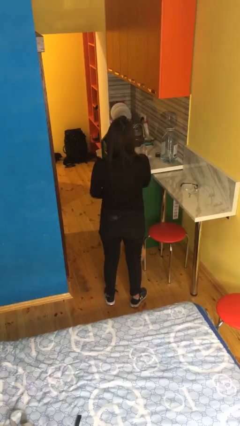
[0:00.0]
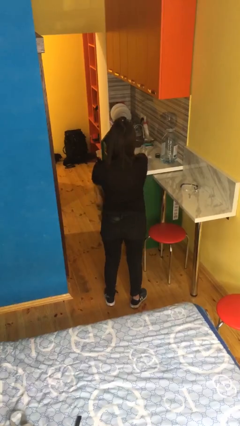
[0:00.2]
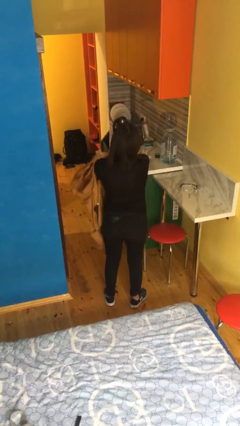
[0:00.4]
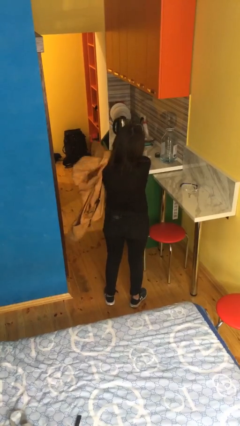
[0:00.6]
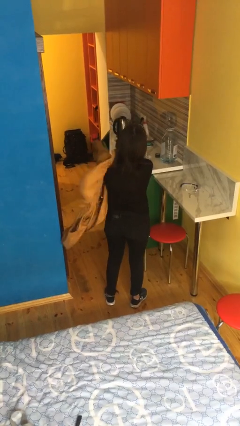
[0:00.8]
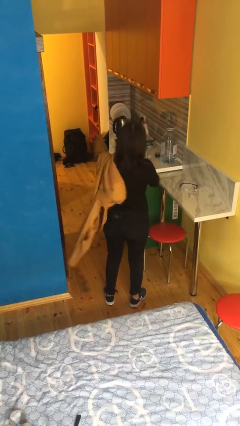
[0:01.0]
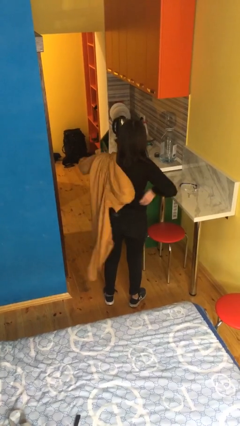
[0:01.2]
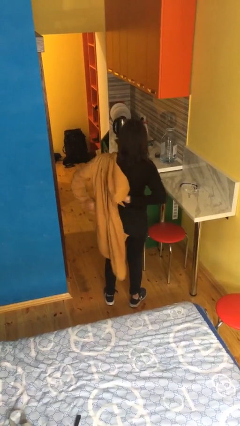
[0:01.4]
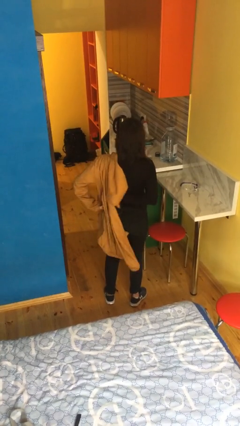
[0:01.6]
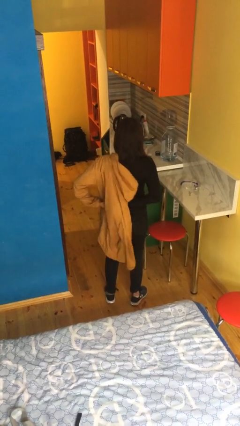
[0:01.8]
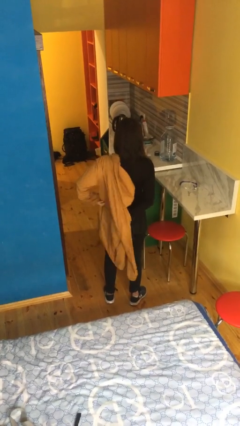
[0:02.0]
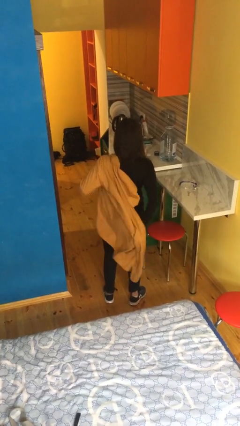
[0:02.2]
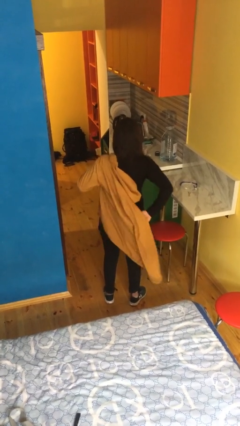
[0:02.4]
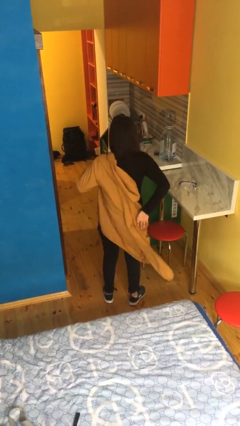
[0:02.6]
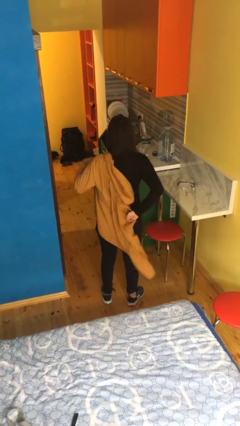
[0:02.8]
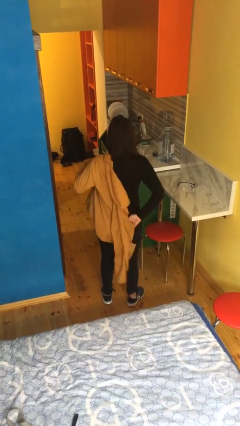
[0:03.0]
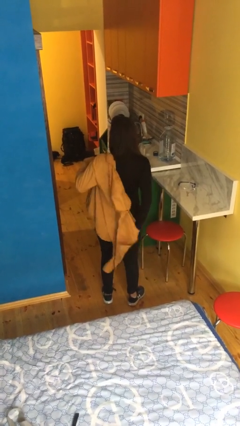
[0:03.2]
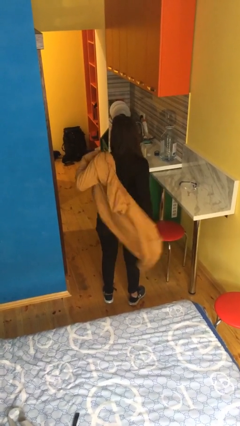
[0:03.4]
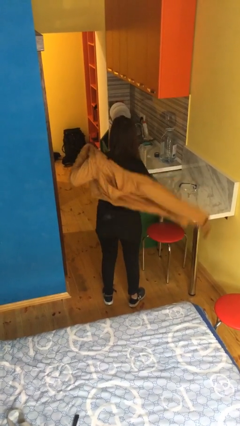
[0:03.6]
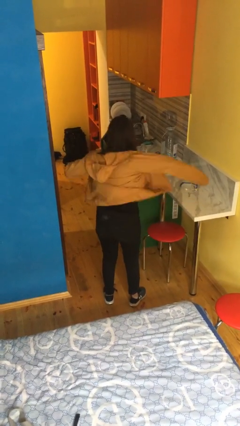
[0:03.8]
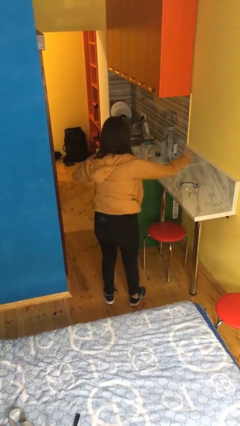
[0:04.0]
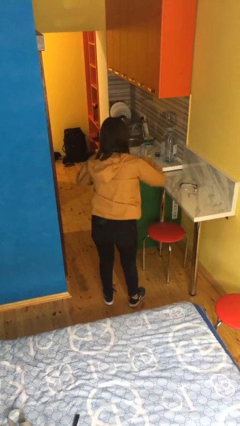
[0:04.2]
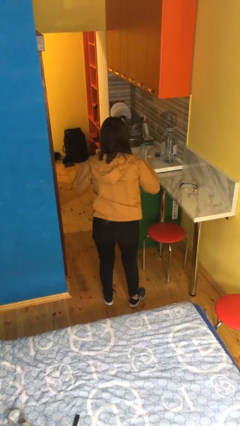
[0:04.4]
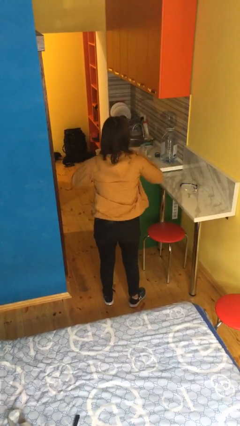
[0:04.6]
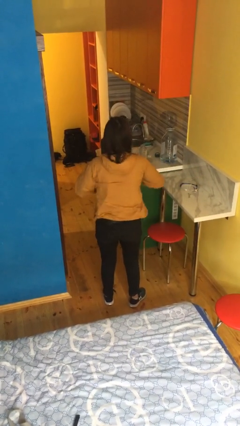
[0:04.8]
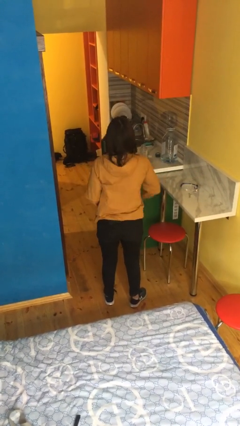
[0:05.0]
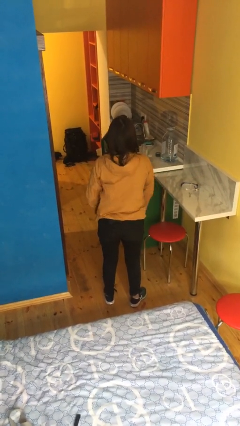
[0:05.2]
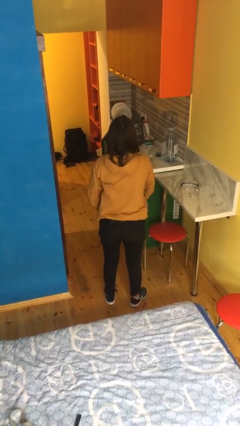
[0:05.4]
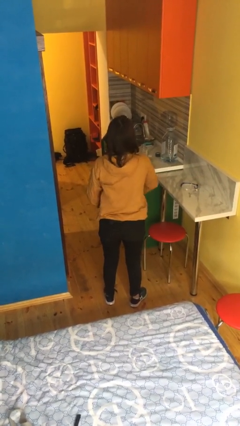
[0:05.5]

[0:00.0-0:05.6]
person puts on jacket

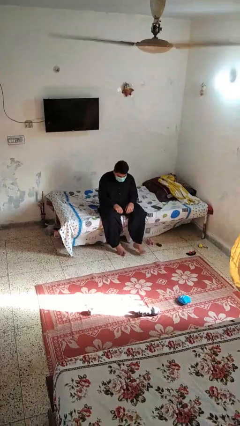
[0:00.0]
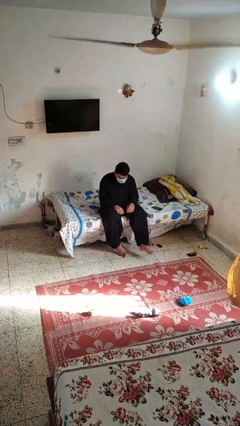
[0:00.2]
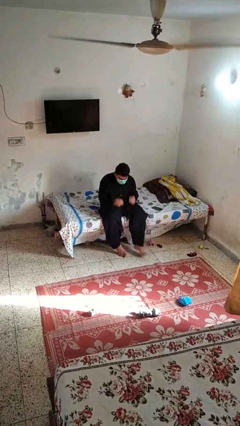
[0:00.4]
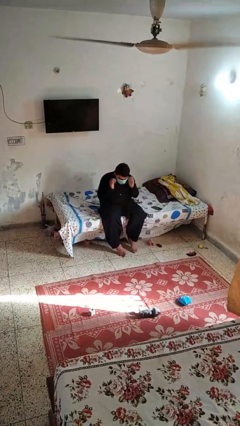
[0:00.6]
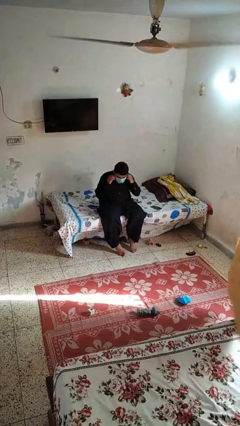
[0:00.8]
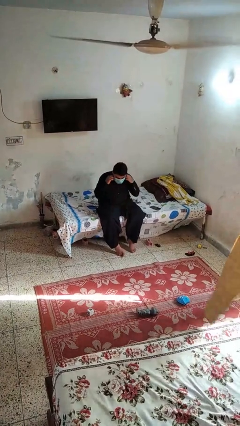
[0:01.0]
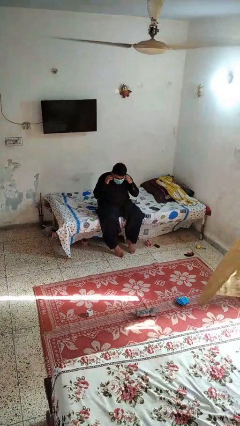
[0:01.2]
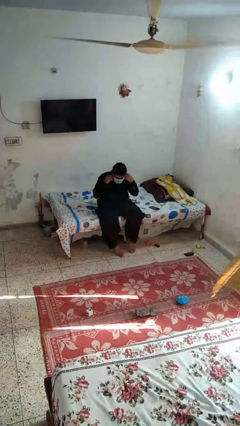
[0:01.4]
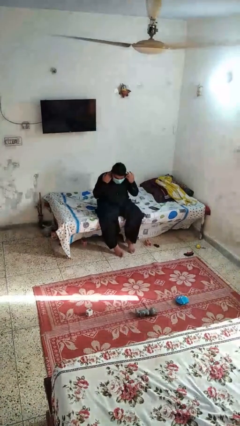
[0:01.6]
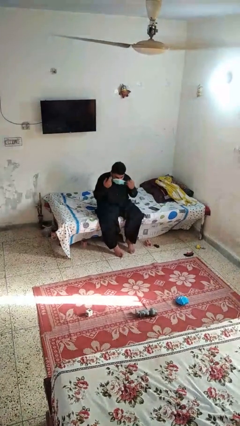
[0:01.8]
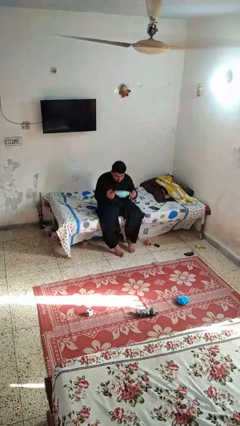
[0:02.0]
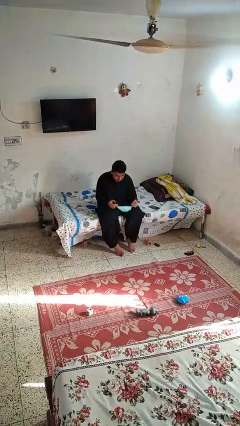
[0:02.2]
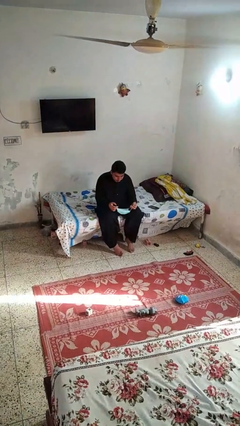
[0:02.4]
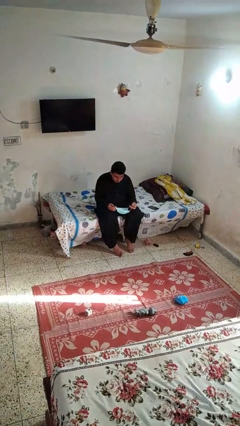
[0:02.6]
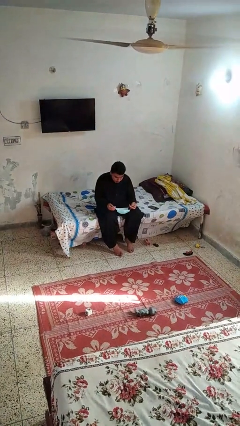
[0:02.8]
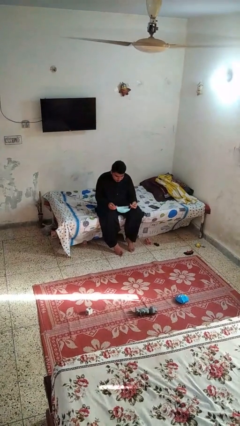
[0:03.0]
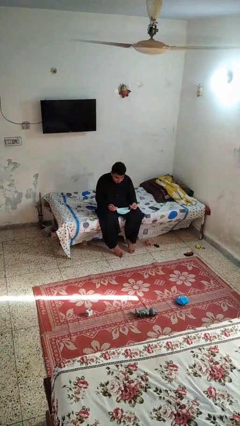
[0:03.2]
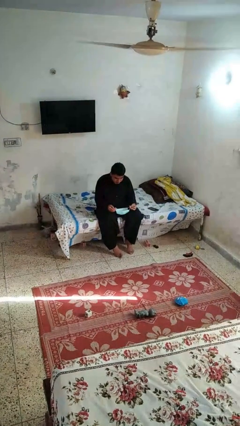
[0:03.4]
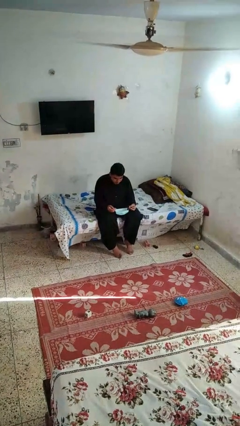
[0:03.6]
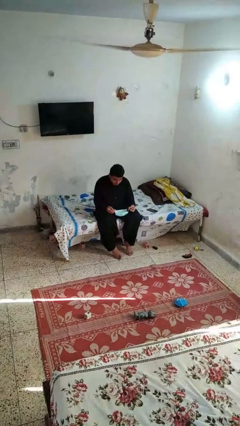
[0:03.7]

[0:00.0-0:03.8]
person takes off facemask

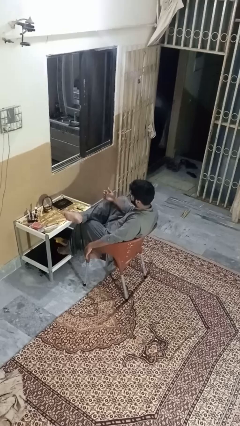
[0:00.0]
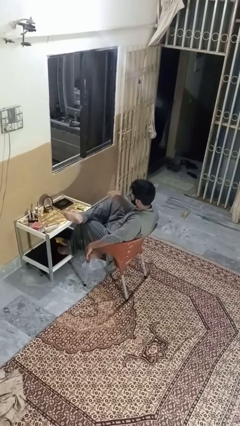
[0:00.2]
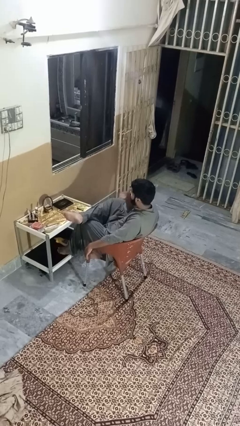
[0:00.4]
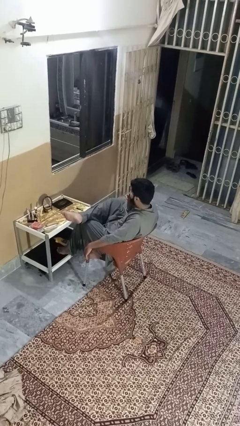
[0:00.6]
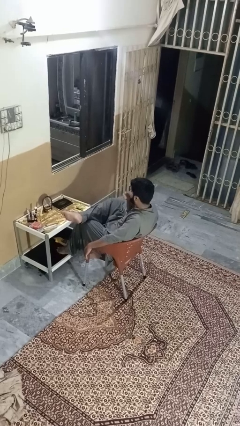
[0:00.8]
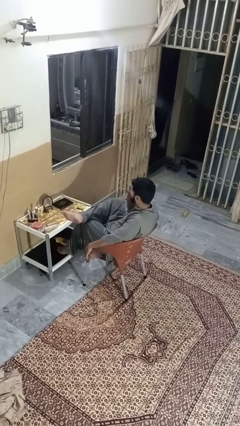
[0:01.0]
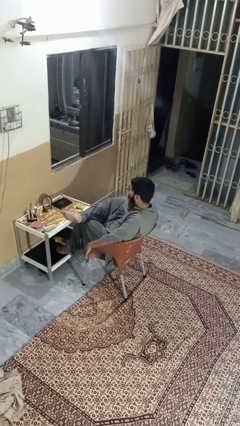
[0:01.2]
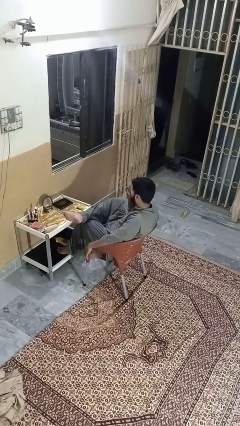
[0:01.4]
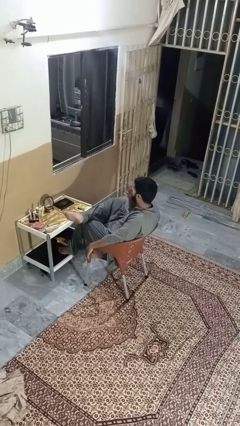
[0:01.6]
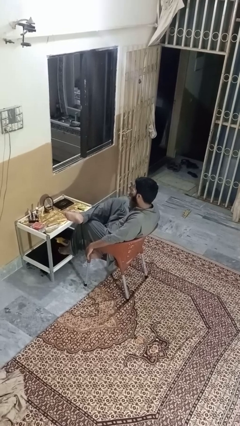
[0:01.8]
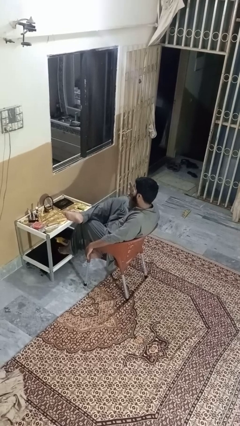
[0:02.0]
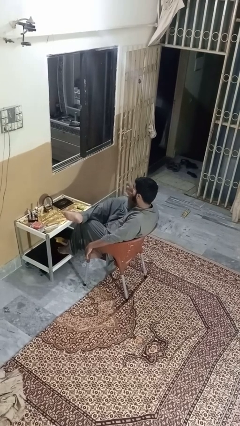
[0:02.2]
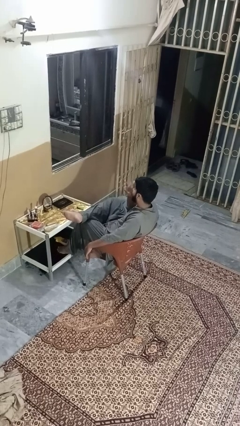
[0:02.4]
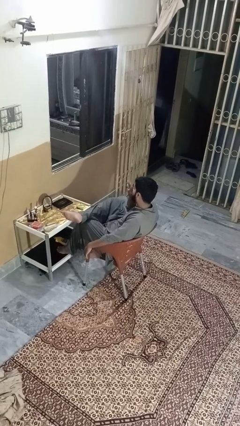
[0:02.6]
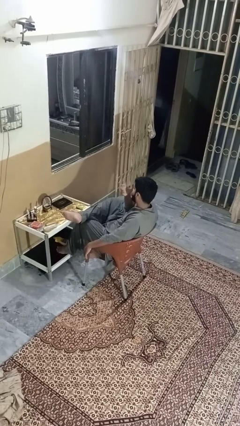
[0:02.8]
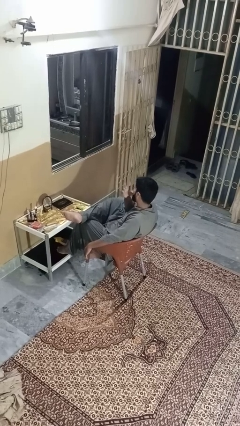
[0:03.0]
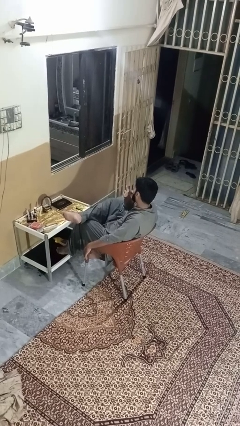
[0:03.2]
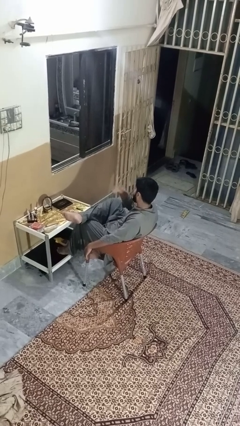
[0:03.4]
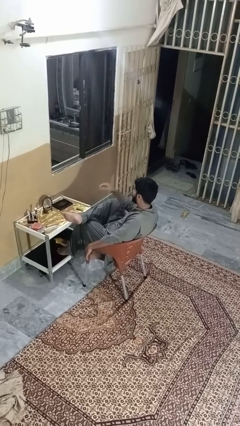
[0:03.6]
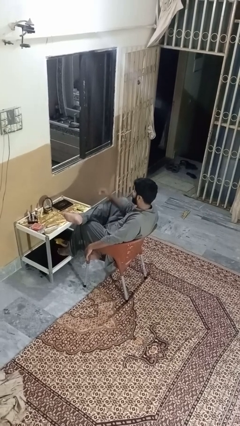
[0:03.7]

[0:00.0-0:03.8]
person licks fingers

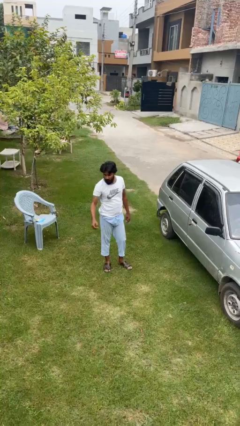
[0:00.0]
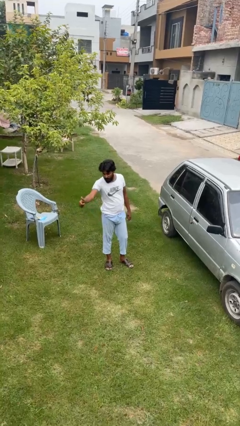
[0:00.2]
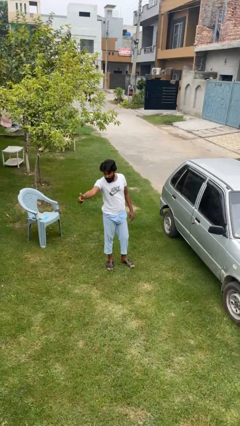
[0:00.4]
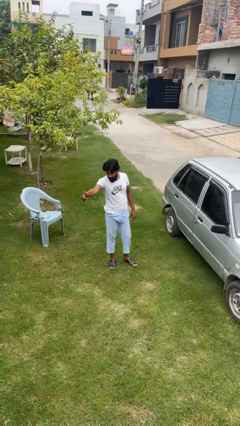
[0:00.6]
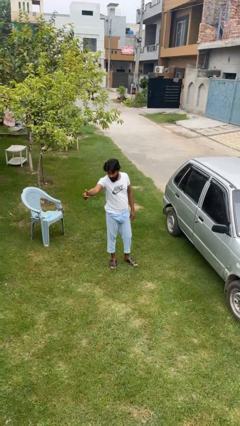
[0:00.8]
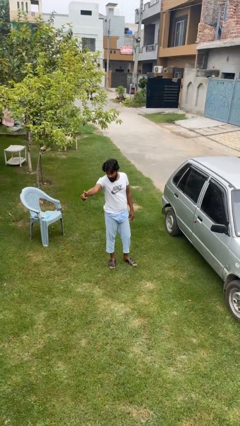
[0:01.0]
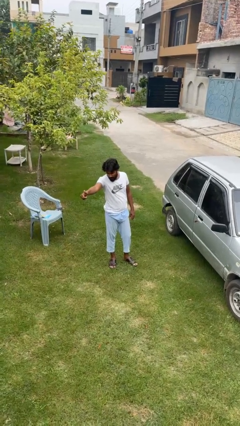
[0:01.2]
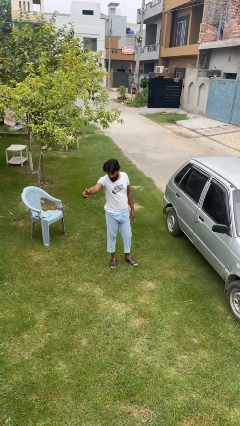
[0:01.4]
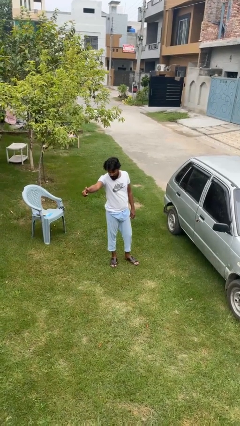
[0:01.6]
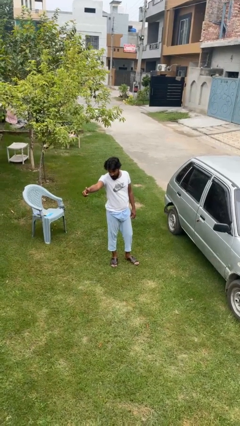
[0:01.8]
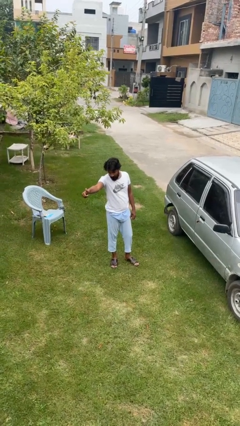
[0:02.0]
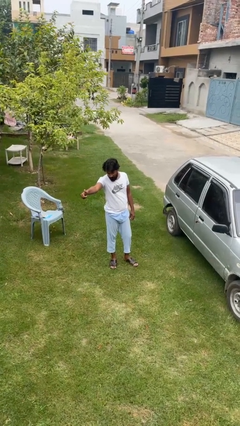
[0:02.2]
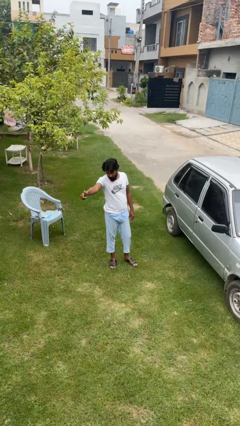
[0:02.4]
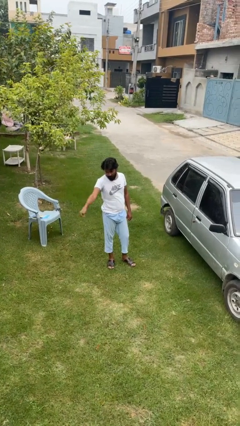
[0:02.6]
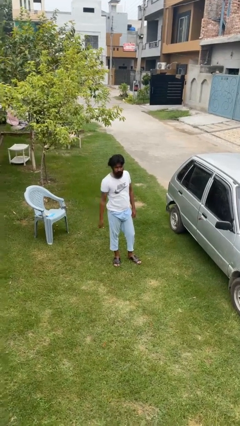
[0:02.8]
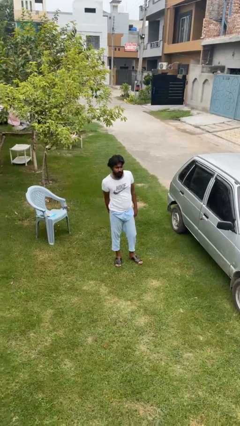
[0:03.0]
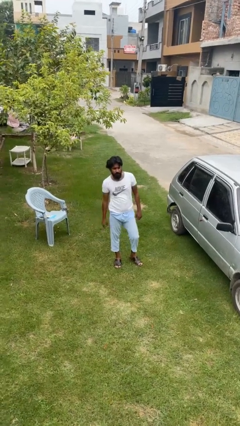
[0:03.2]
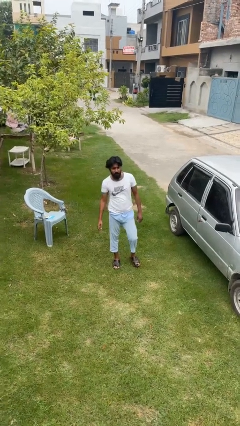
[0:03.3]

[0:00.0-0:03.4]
person gestures thumbs up

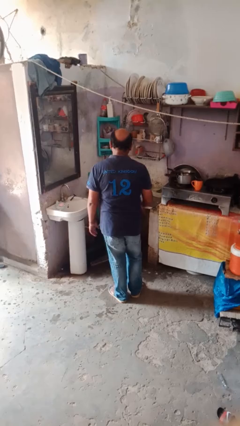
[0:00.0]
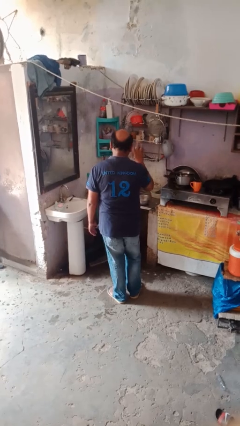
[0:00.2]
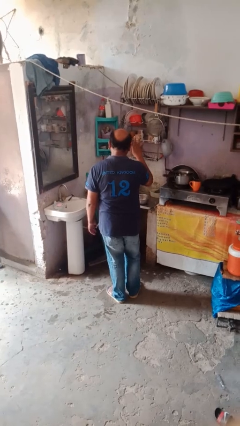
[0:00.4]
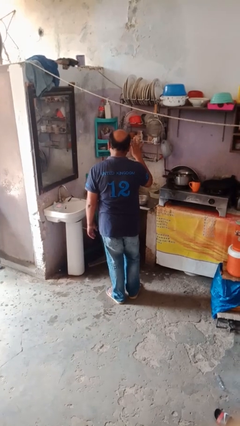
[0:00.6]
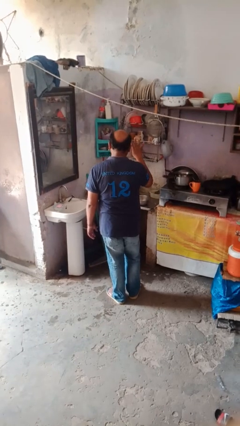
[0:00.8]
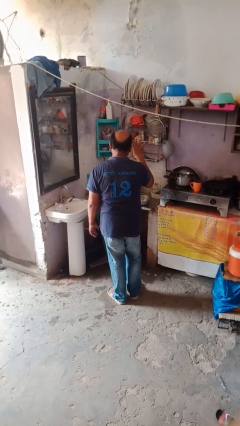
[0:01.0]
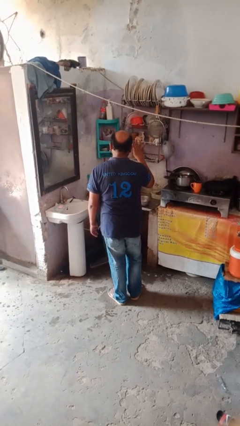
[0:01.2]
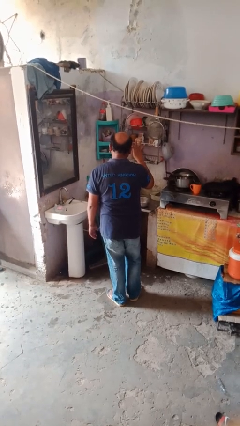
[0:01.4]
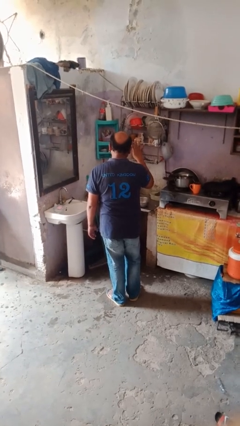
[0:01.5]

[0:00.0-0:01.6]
person gestures number four
